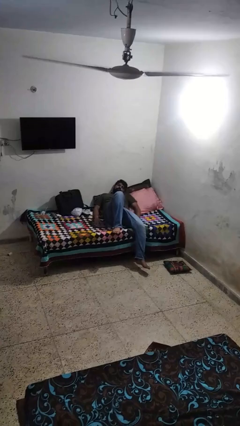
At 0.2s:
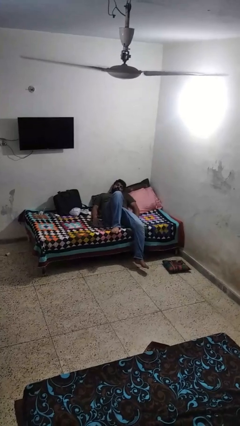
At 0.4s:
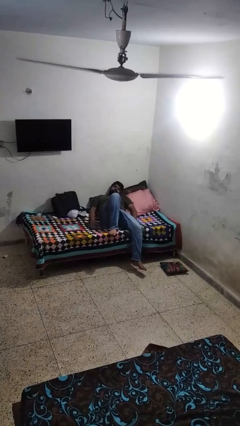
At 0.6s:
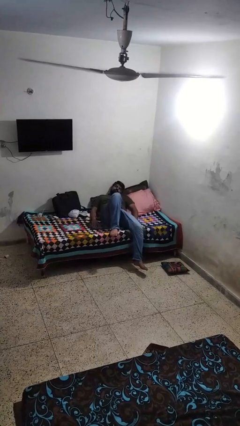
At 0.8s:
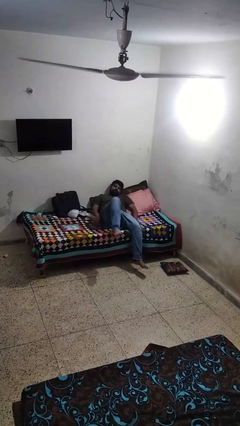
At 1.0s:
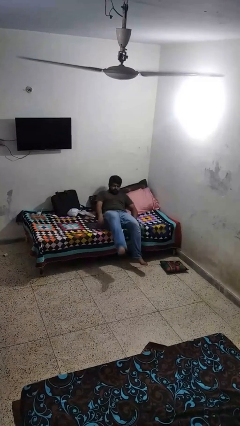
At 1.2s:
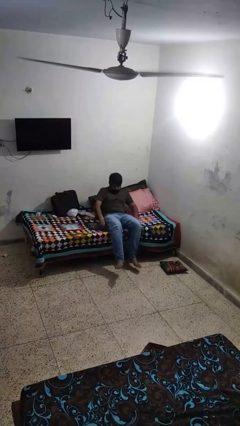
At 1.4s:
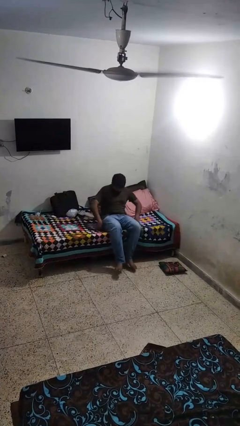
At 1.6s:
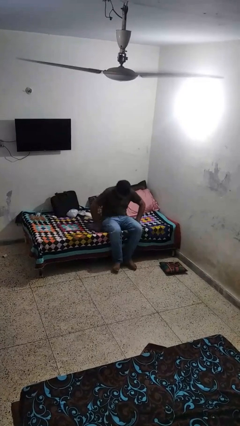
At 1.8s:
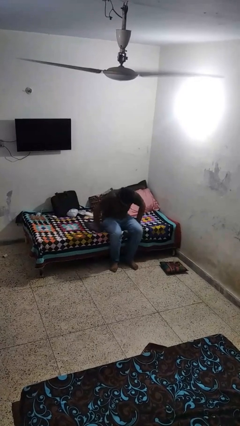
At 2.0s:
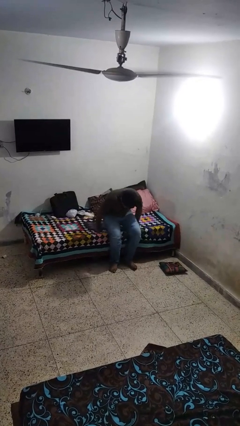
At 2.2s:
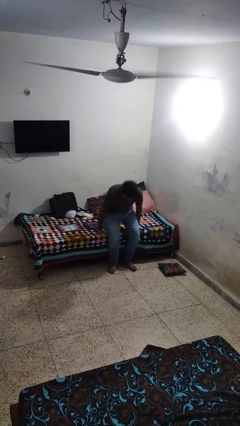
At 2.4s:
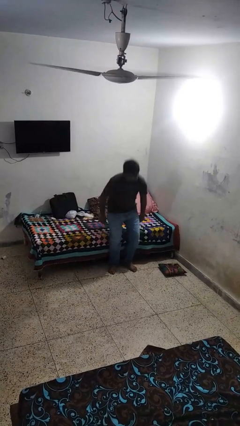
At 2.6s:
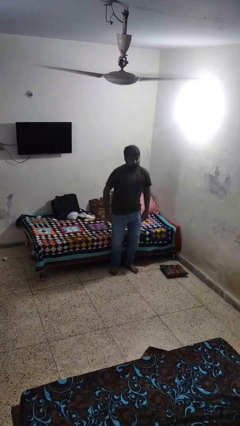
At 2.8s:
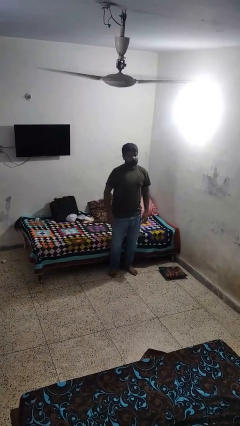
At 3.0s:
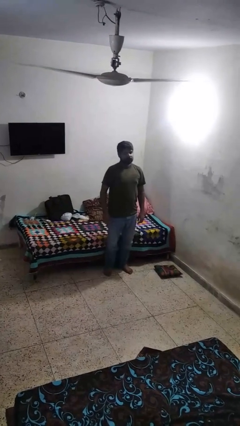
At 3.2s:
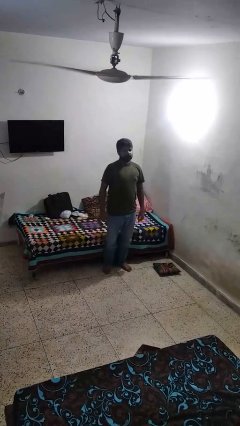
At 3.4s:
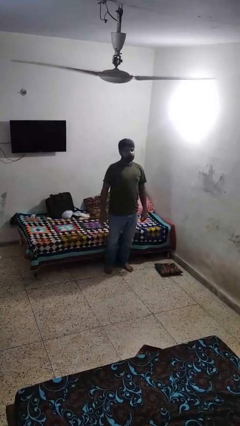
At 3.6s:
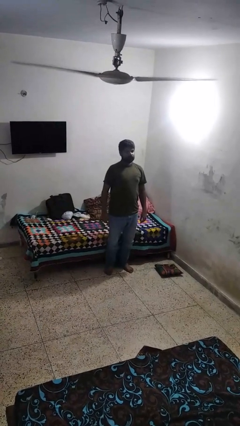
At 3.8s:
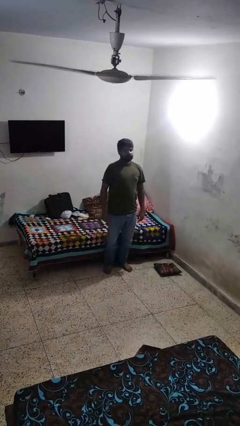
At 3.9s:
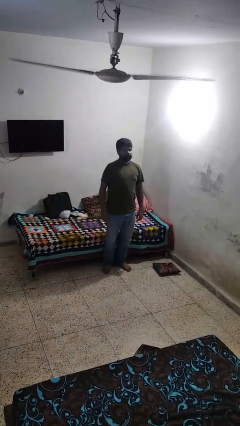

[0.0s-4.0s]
person stands up

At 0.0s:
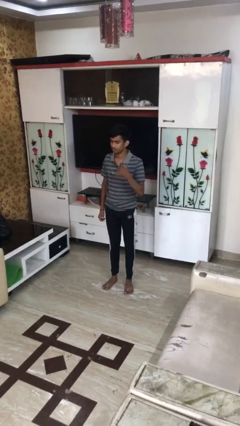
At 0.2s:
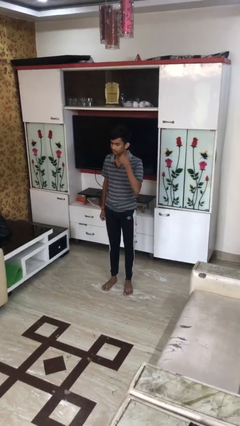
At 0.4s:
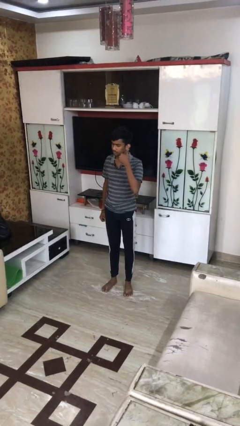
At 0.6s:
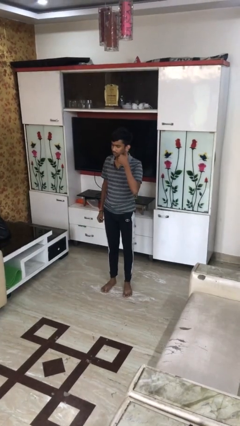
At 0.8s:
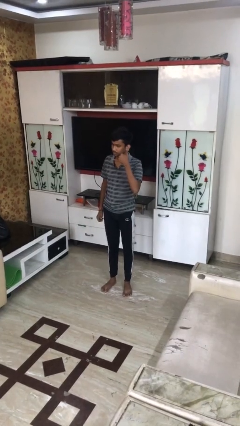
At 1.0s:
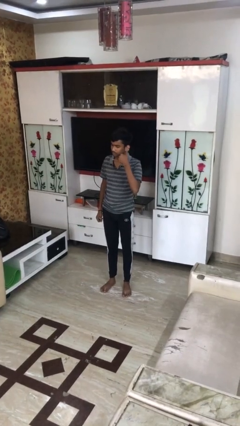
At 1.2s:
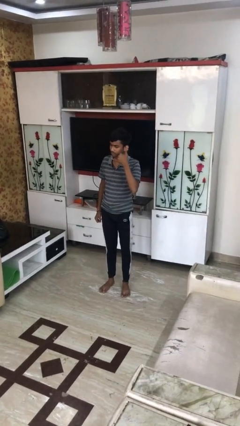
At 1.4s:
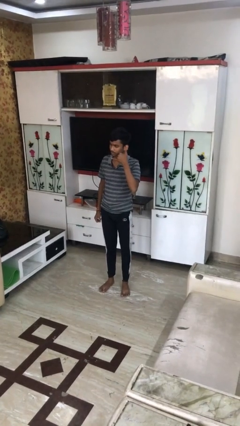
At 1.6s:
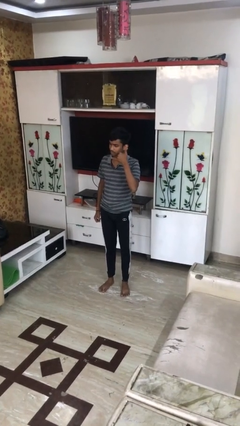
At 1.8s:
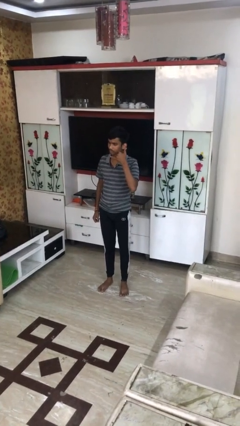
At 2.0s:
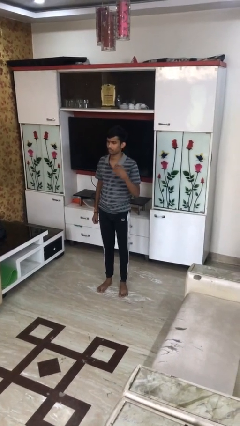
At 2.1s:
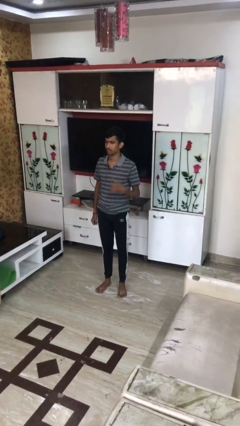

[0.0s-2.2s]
person gestures call me

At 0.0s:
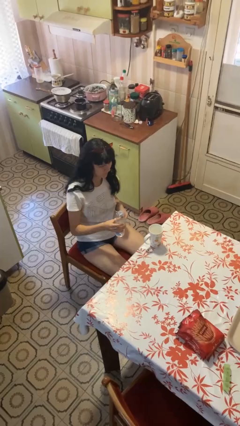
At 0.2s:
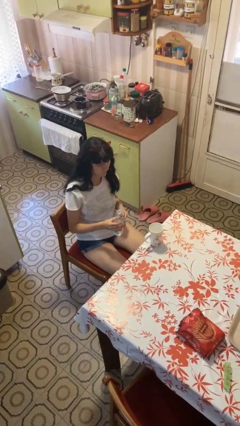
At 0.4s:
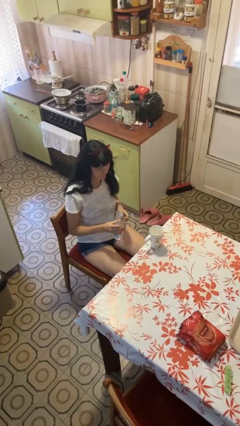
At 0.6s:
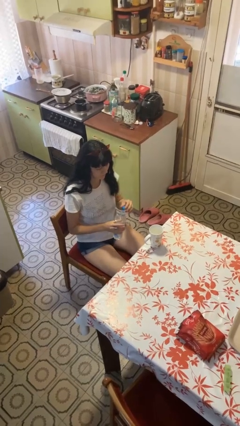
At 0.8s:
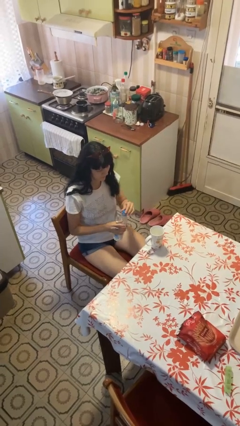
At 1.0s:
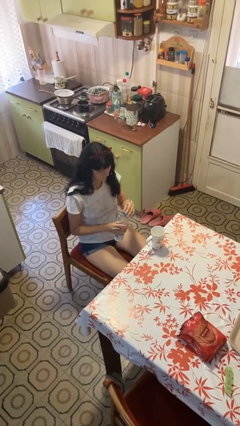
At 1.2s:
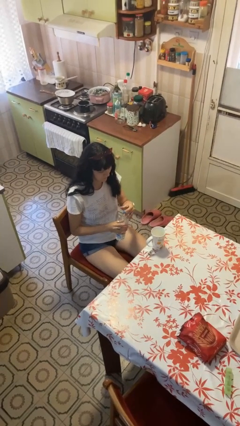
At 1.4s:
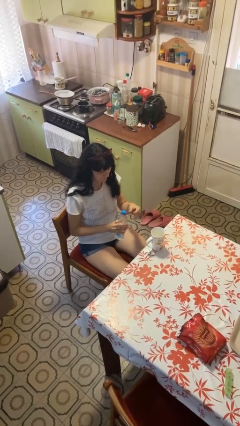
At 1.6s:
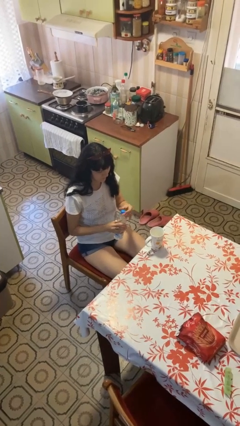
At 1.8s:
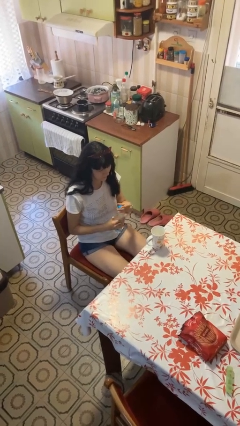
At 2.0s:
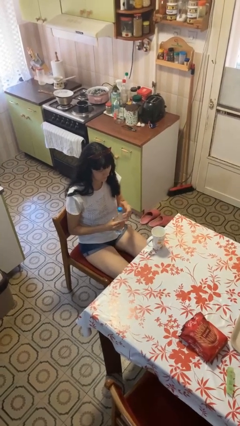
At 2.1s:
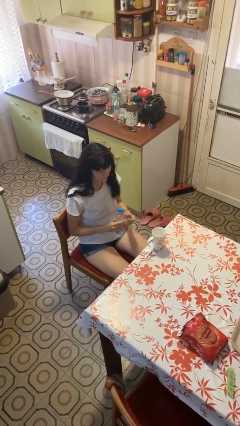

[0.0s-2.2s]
person screws lid to bottle

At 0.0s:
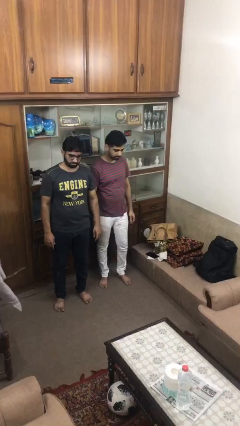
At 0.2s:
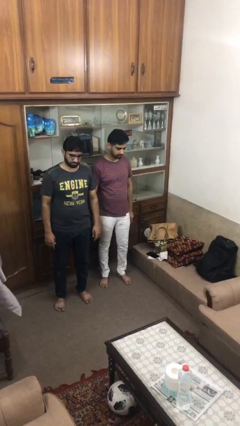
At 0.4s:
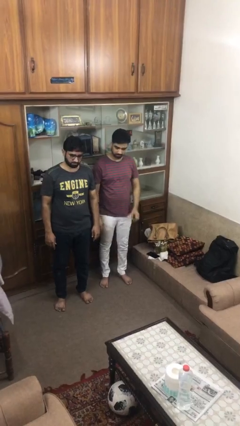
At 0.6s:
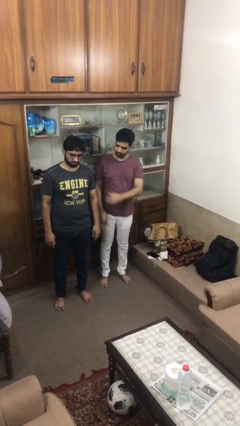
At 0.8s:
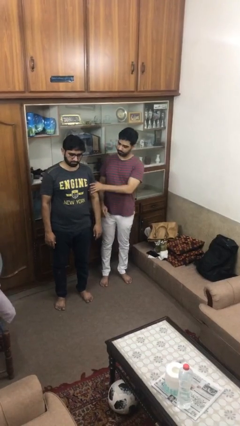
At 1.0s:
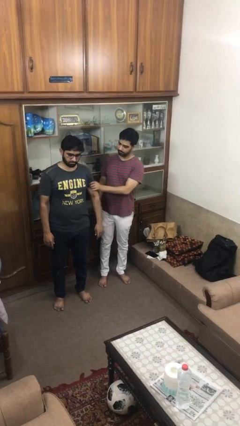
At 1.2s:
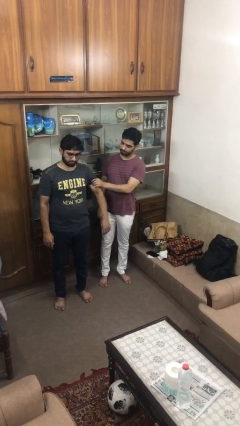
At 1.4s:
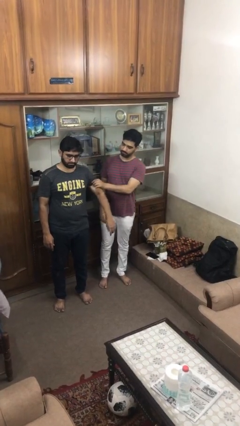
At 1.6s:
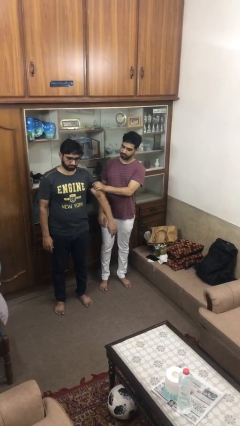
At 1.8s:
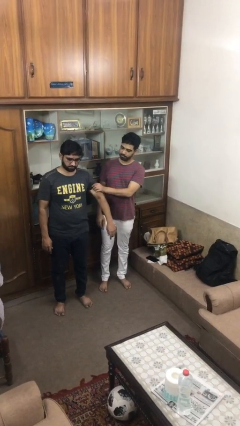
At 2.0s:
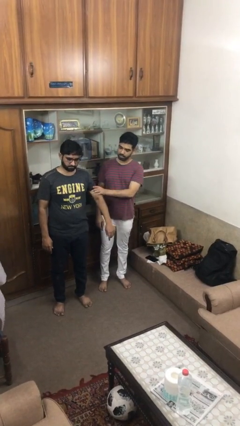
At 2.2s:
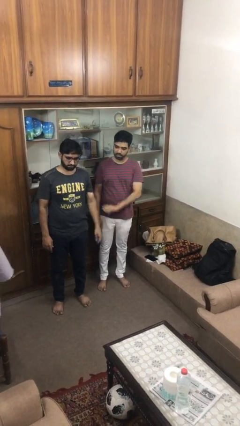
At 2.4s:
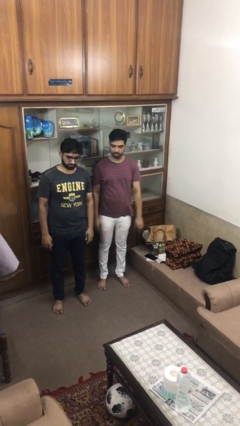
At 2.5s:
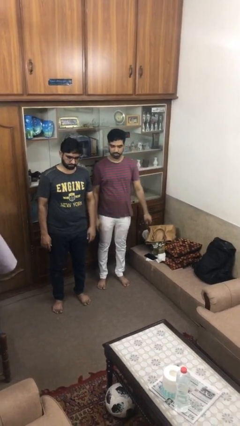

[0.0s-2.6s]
person grabs person by bicep

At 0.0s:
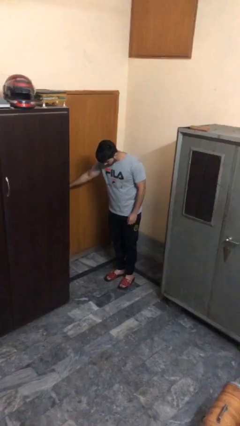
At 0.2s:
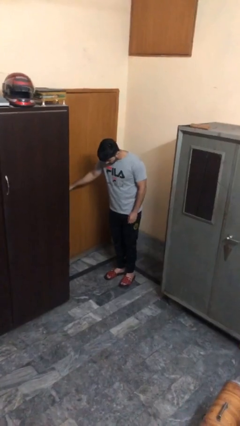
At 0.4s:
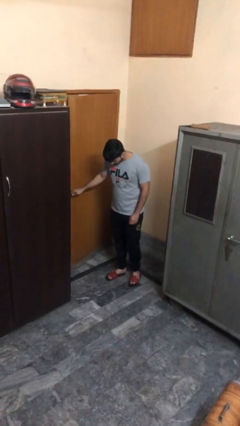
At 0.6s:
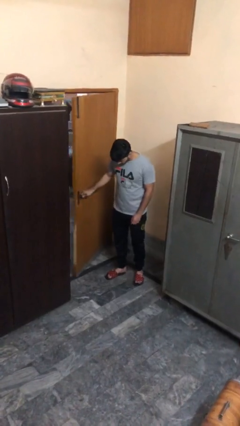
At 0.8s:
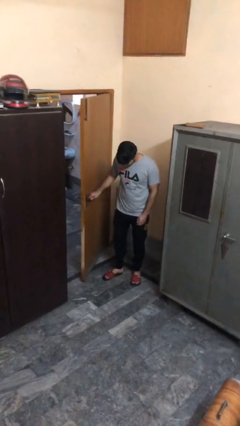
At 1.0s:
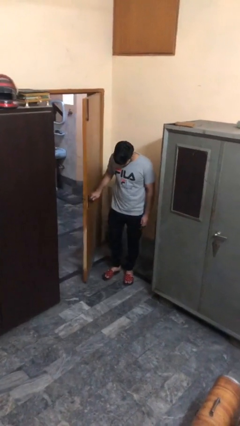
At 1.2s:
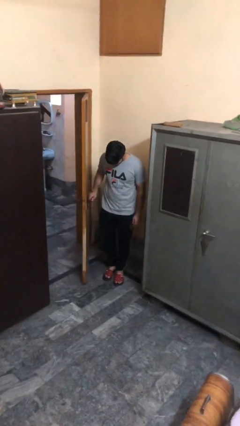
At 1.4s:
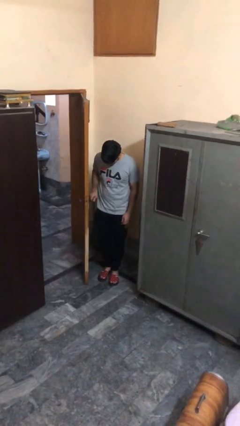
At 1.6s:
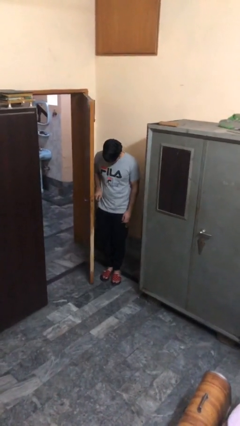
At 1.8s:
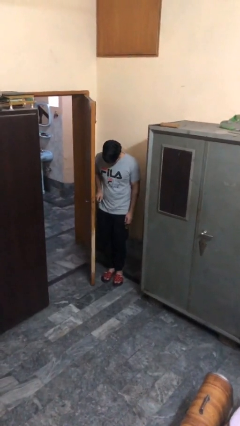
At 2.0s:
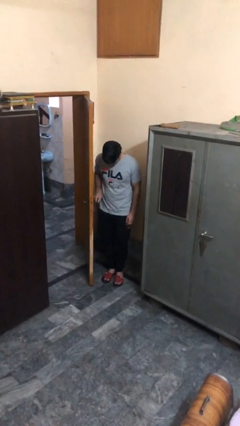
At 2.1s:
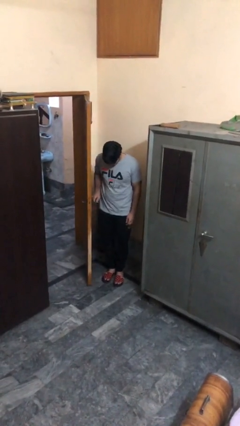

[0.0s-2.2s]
person opens facility door

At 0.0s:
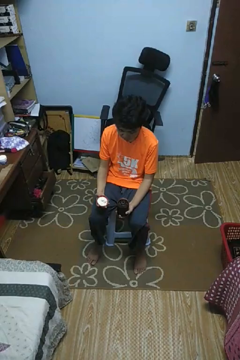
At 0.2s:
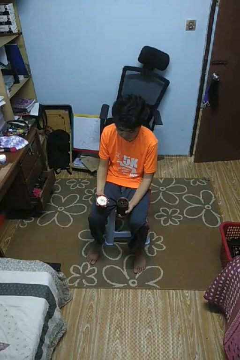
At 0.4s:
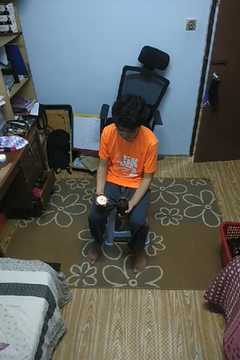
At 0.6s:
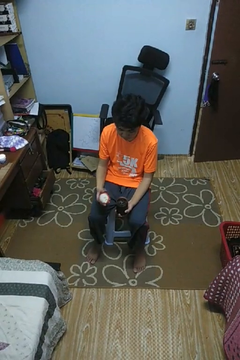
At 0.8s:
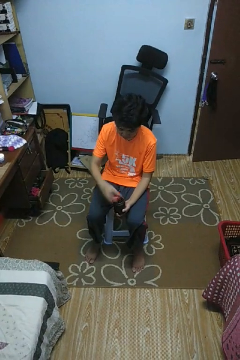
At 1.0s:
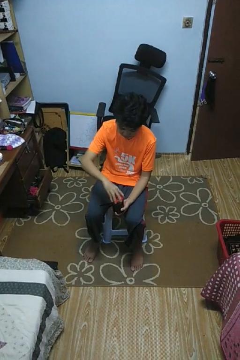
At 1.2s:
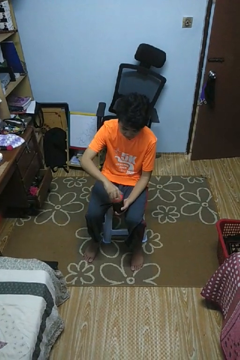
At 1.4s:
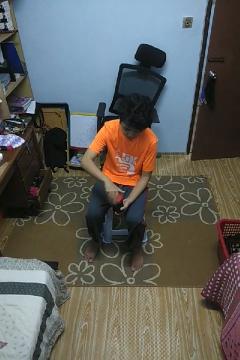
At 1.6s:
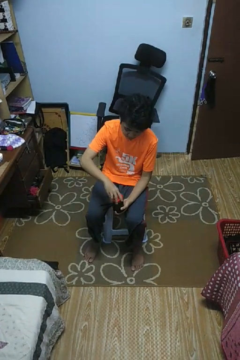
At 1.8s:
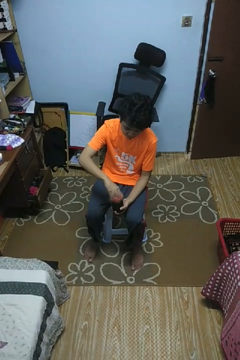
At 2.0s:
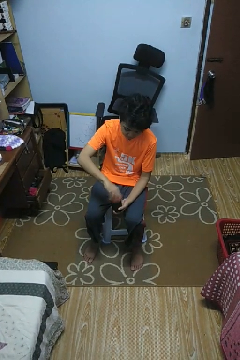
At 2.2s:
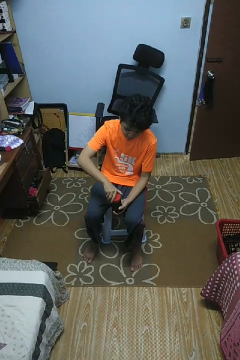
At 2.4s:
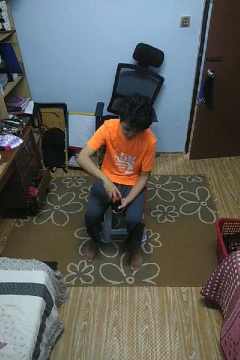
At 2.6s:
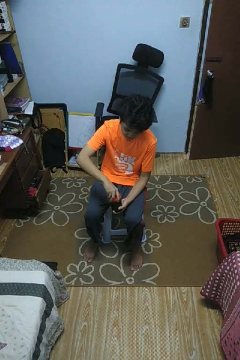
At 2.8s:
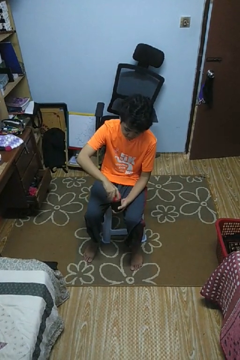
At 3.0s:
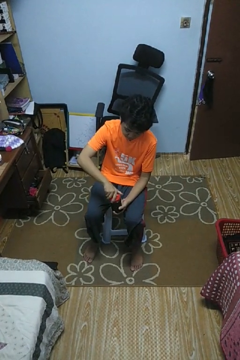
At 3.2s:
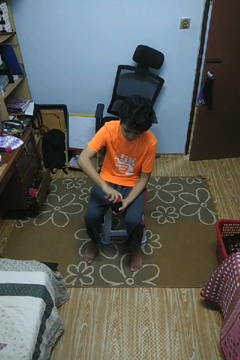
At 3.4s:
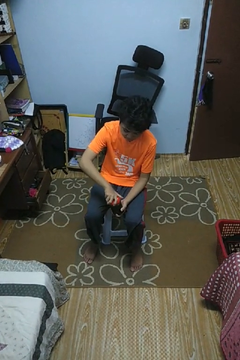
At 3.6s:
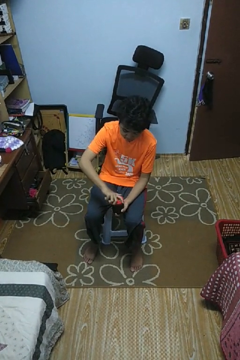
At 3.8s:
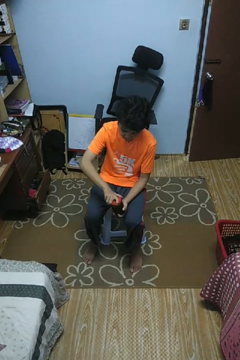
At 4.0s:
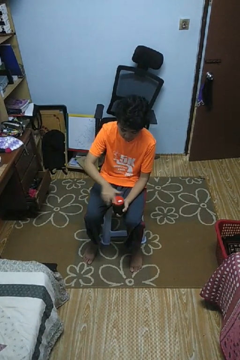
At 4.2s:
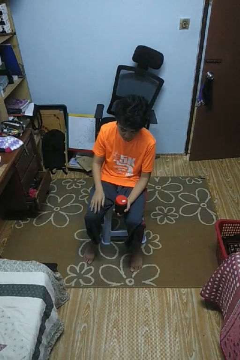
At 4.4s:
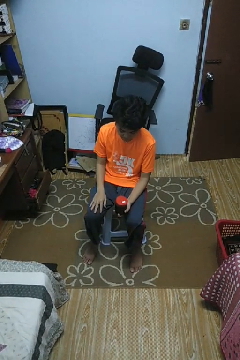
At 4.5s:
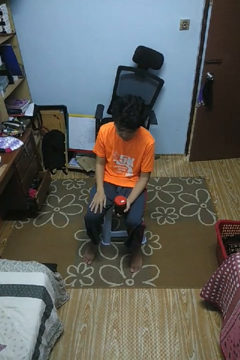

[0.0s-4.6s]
person closes jar

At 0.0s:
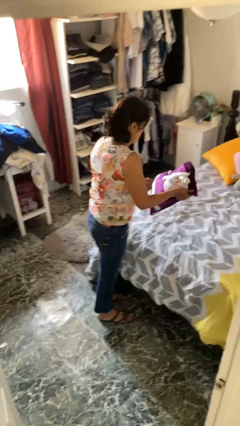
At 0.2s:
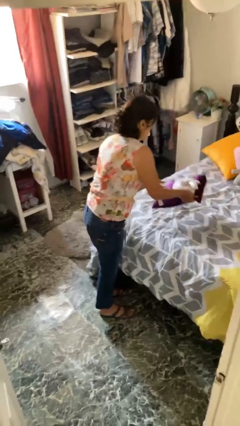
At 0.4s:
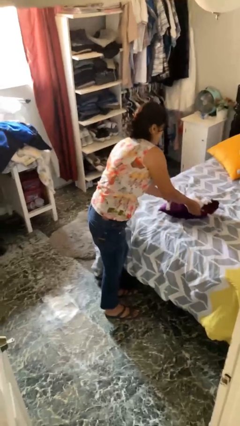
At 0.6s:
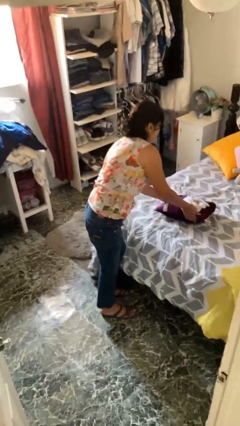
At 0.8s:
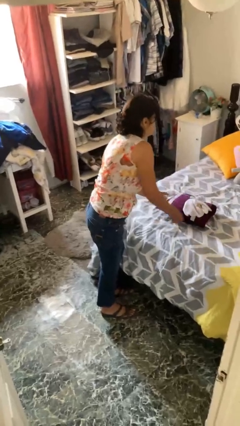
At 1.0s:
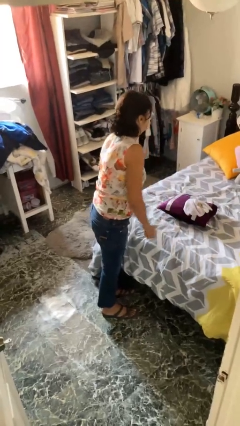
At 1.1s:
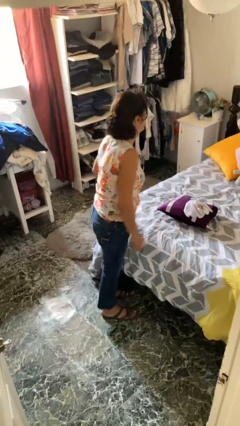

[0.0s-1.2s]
person puts down object on bed
